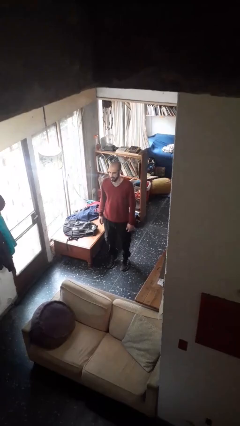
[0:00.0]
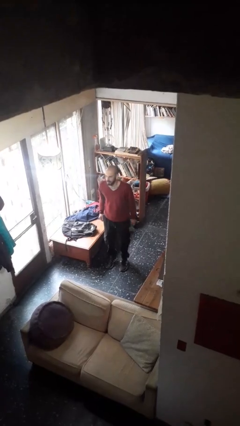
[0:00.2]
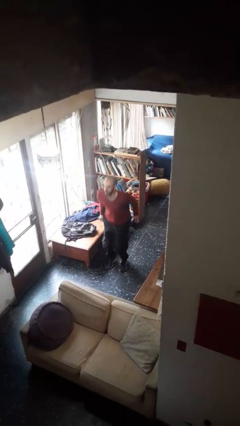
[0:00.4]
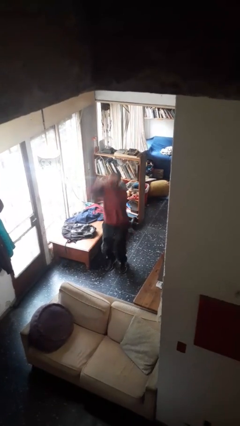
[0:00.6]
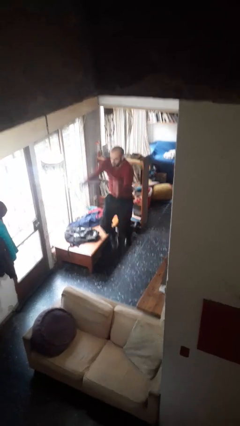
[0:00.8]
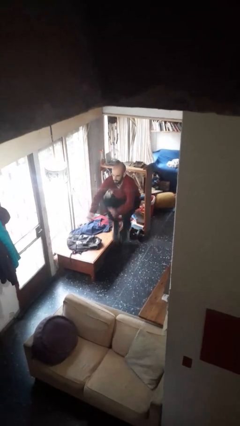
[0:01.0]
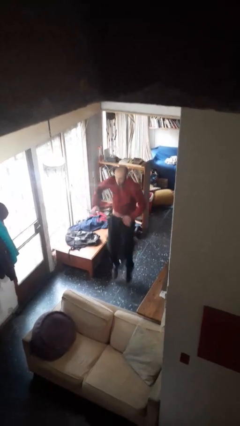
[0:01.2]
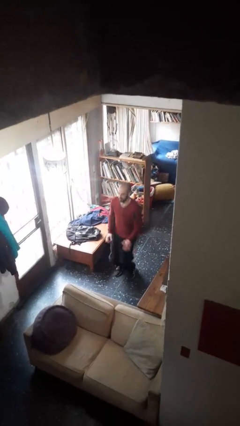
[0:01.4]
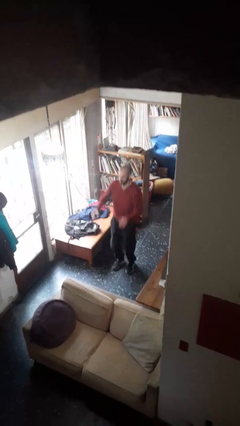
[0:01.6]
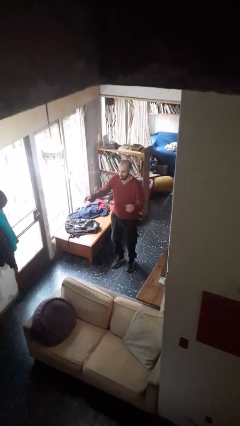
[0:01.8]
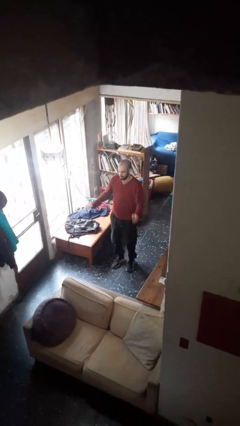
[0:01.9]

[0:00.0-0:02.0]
person jumps

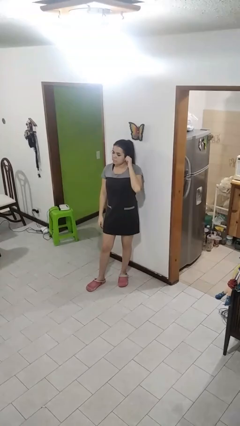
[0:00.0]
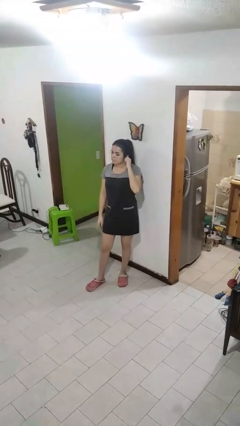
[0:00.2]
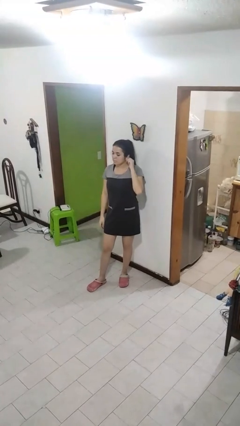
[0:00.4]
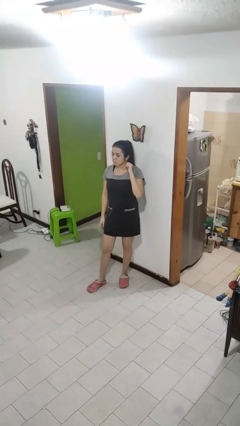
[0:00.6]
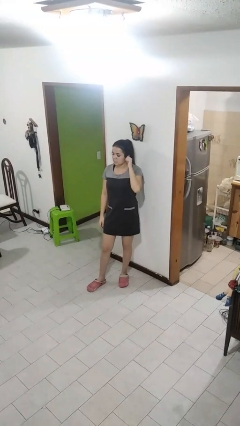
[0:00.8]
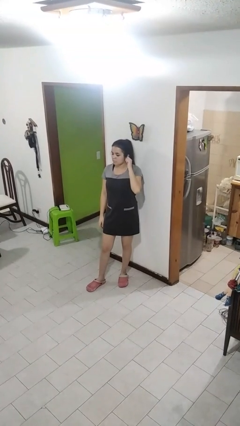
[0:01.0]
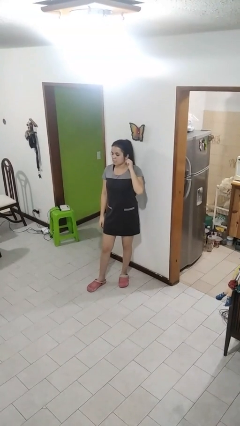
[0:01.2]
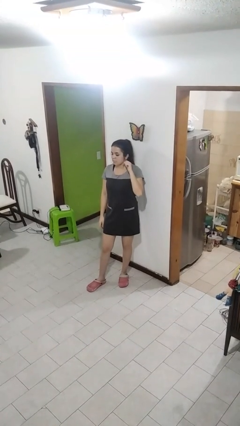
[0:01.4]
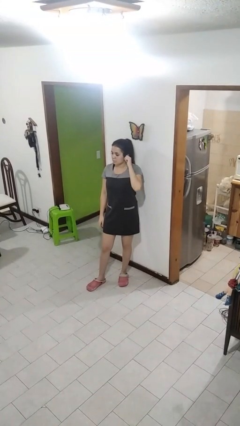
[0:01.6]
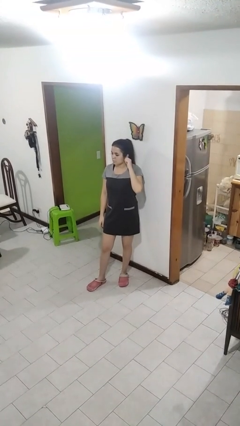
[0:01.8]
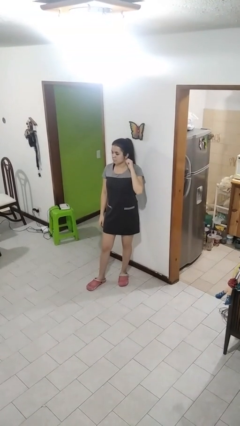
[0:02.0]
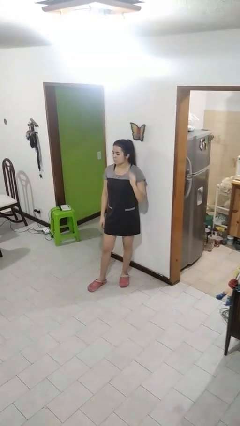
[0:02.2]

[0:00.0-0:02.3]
person touches earlobe

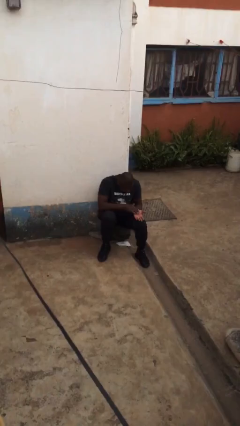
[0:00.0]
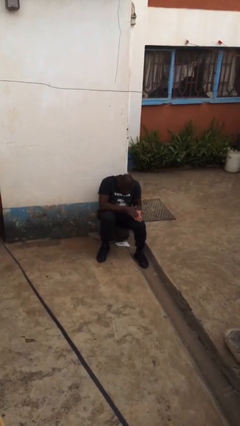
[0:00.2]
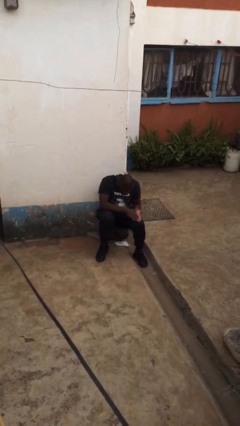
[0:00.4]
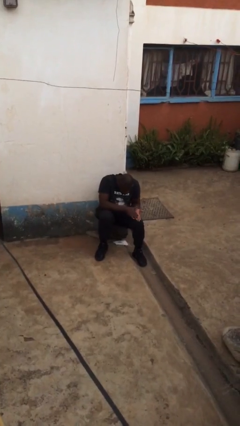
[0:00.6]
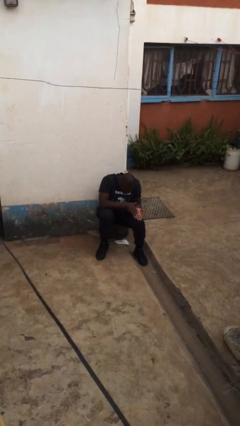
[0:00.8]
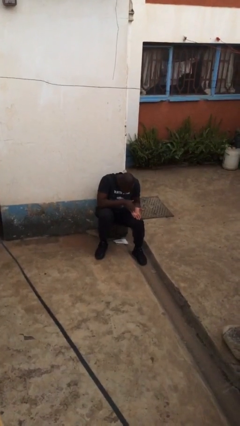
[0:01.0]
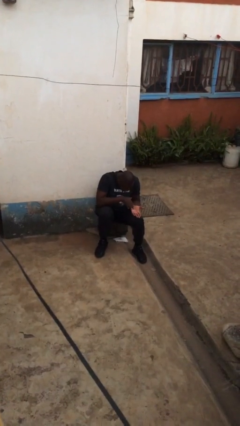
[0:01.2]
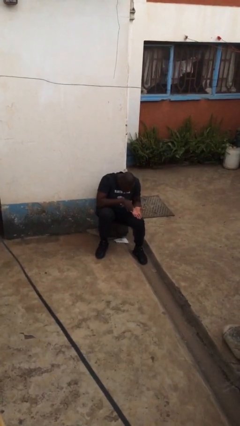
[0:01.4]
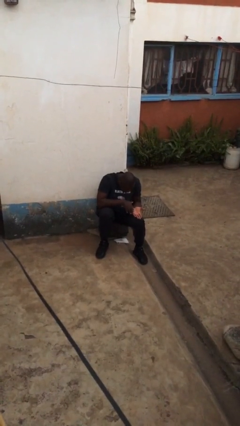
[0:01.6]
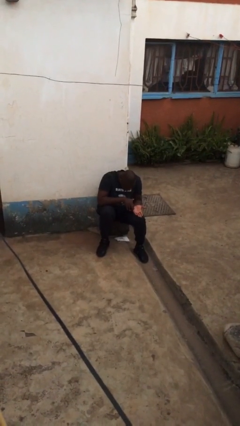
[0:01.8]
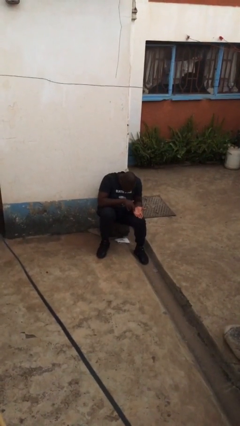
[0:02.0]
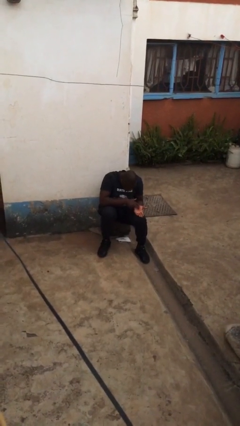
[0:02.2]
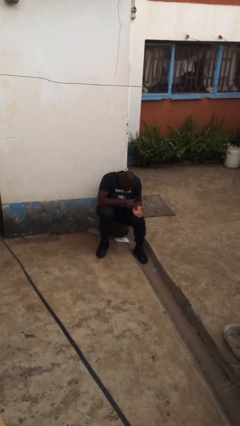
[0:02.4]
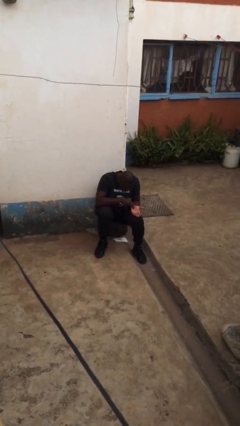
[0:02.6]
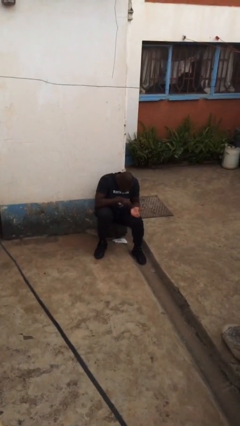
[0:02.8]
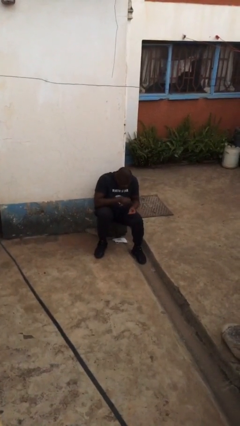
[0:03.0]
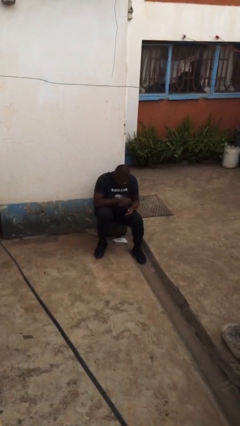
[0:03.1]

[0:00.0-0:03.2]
person looks at hands in lap

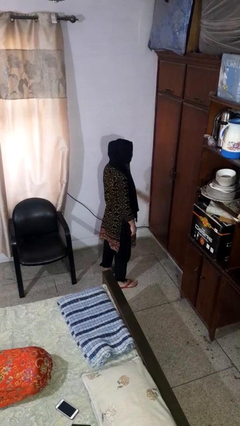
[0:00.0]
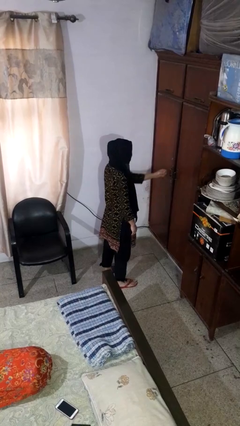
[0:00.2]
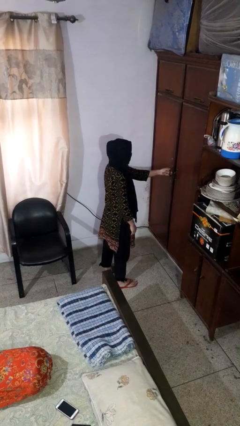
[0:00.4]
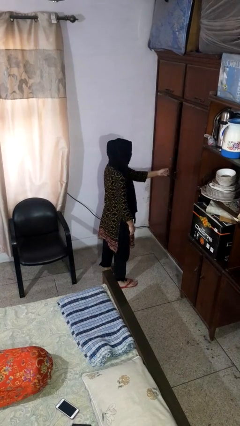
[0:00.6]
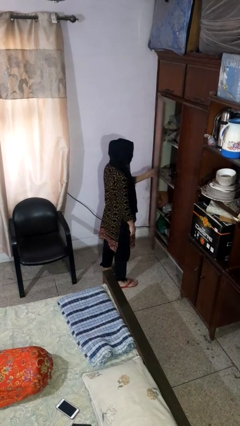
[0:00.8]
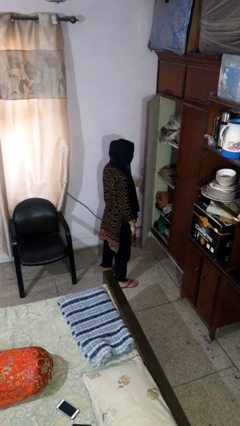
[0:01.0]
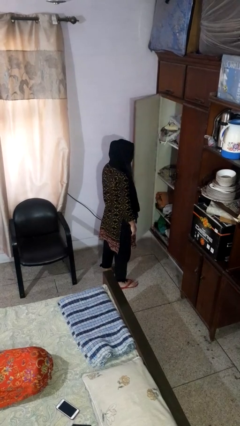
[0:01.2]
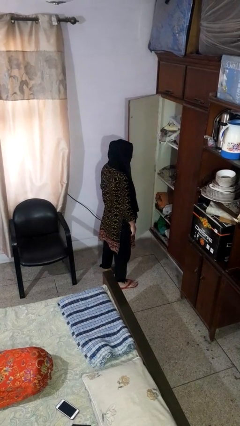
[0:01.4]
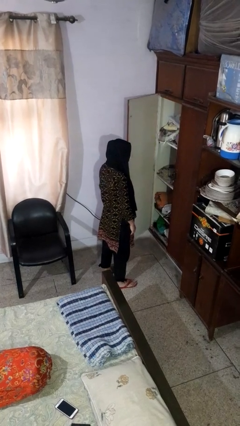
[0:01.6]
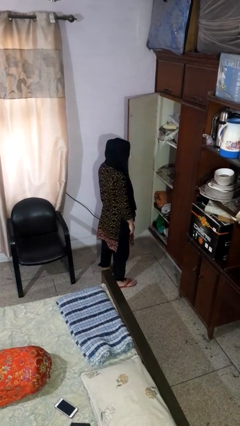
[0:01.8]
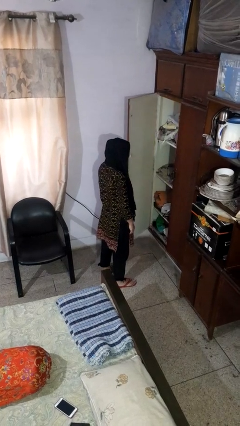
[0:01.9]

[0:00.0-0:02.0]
person opens closet door

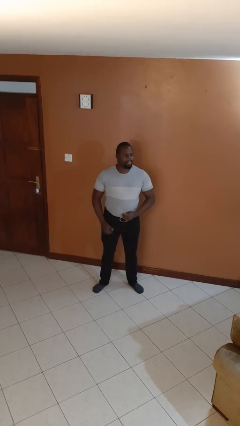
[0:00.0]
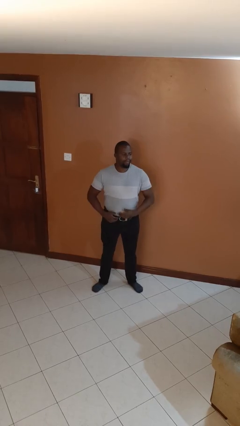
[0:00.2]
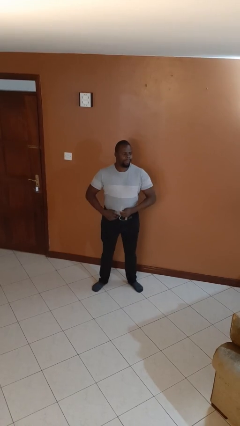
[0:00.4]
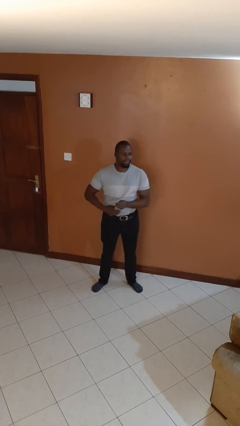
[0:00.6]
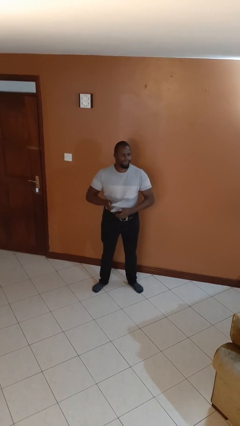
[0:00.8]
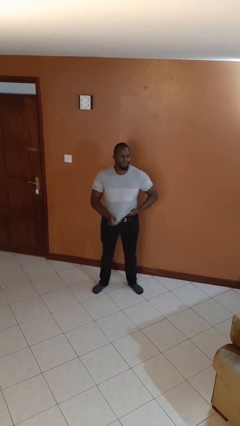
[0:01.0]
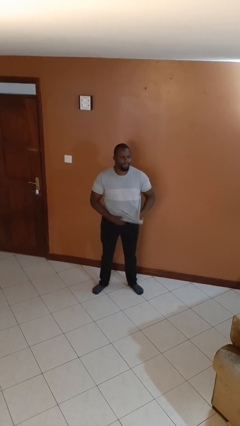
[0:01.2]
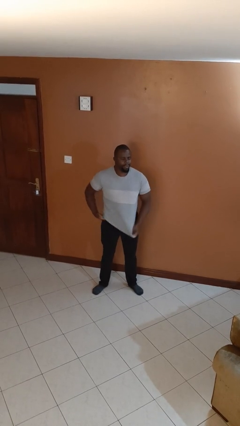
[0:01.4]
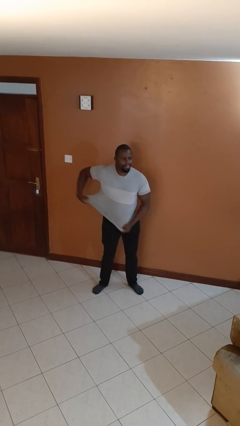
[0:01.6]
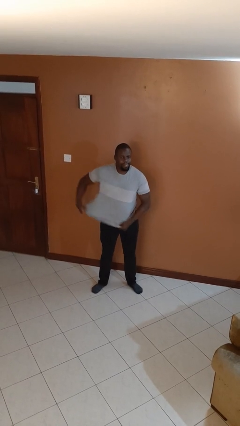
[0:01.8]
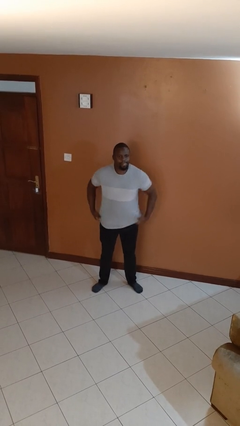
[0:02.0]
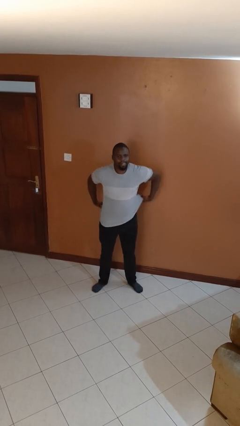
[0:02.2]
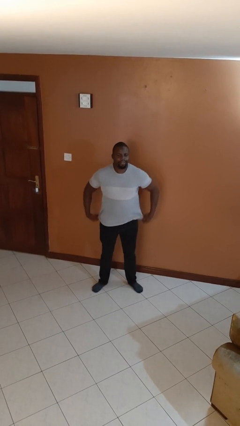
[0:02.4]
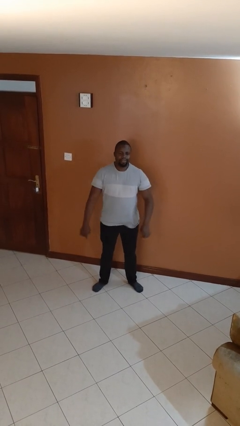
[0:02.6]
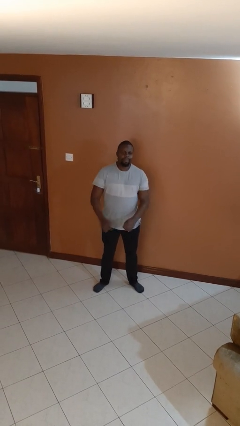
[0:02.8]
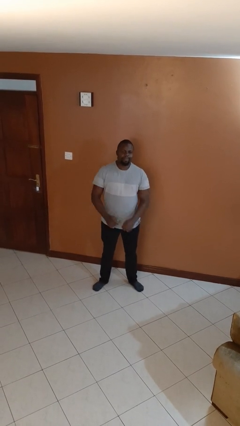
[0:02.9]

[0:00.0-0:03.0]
person untucks shirt

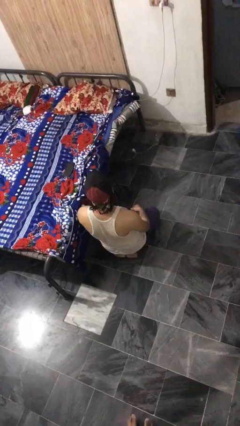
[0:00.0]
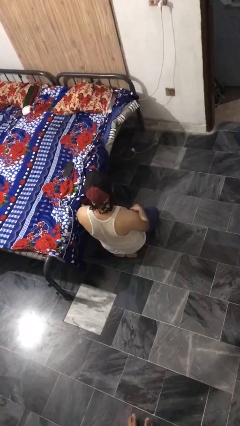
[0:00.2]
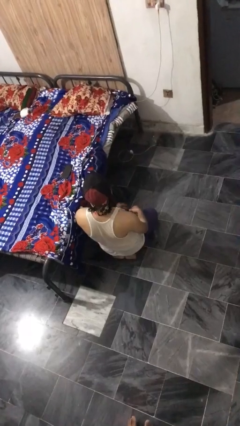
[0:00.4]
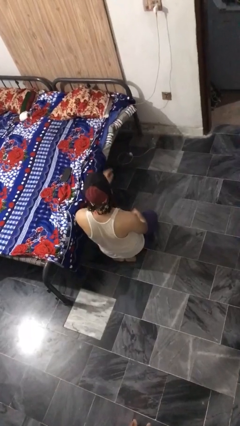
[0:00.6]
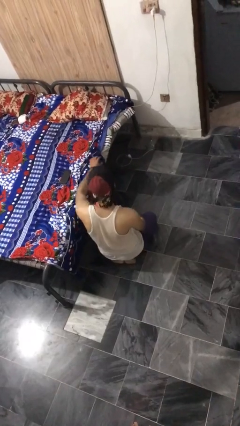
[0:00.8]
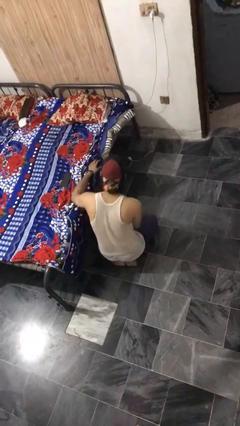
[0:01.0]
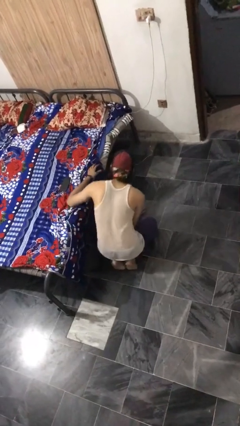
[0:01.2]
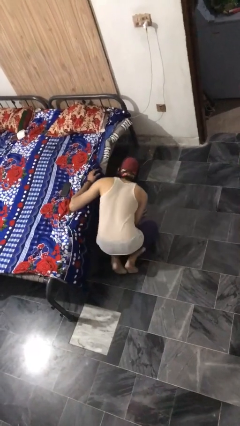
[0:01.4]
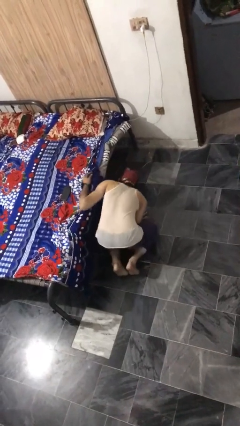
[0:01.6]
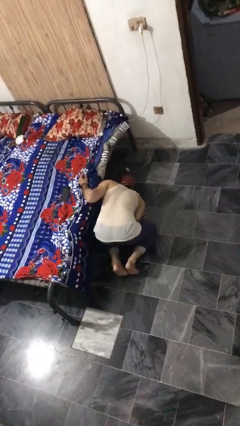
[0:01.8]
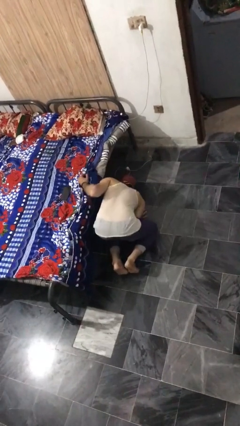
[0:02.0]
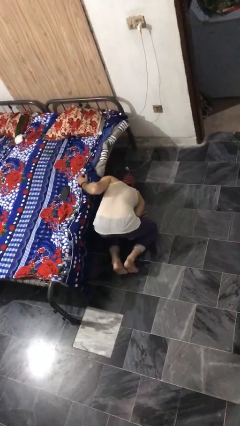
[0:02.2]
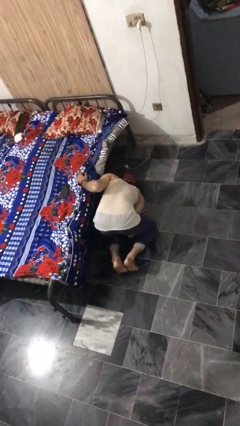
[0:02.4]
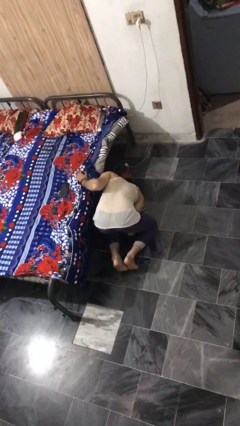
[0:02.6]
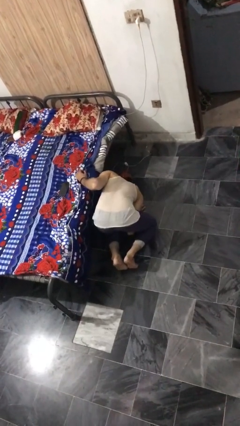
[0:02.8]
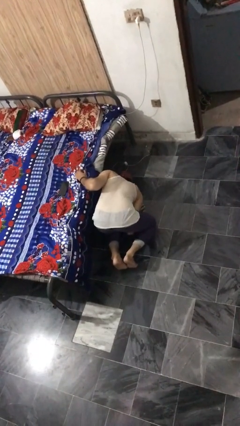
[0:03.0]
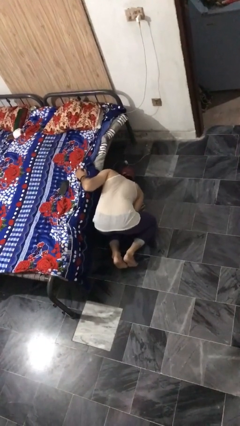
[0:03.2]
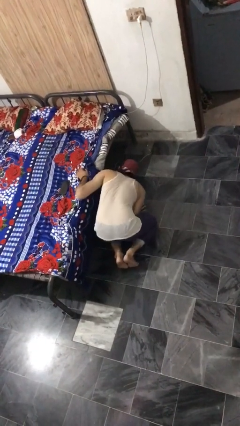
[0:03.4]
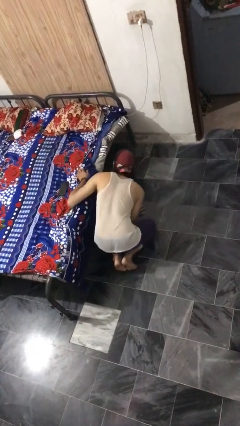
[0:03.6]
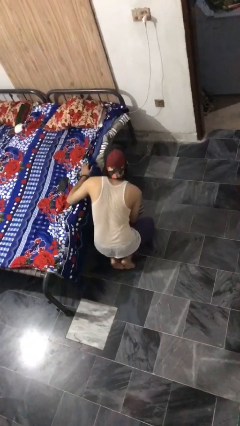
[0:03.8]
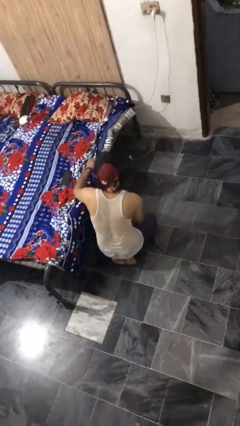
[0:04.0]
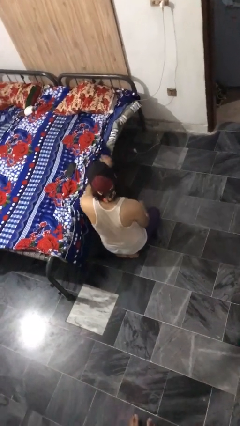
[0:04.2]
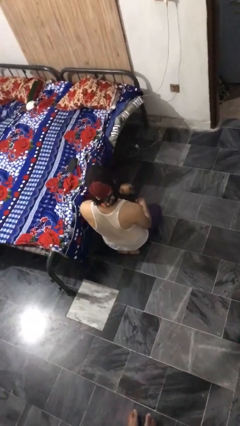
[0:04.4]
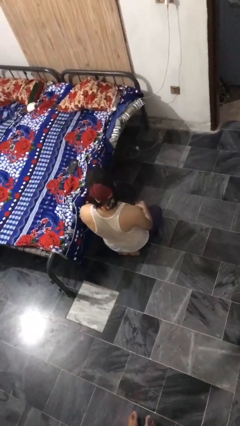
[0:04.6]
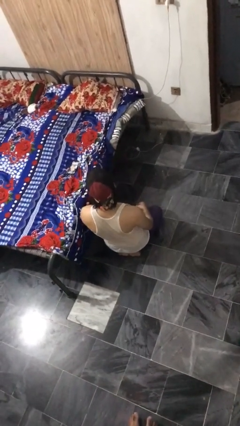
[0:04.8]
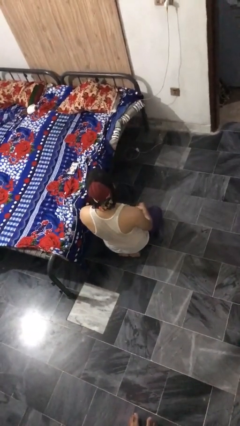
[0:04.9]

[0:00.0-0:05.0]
person searches under bed
